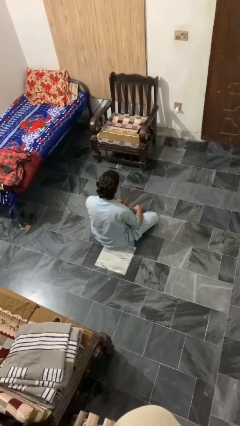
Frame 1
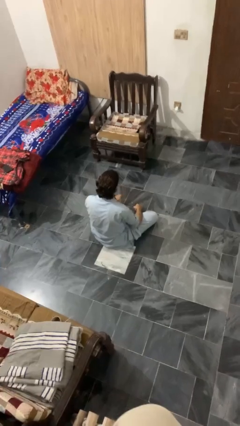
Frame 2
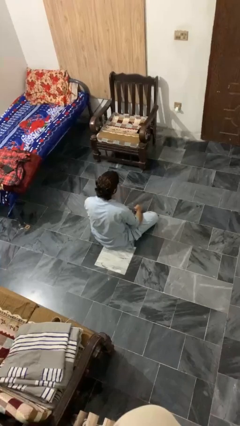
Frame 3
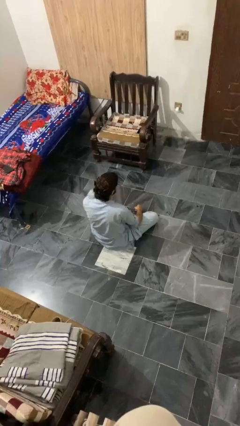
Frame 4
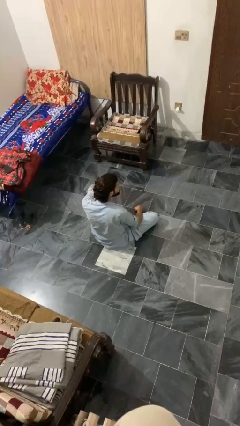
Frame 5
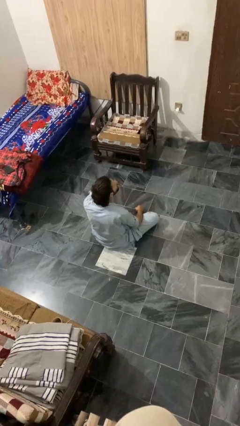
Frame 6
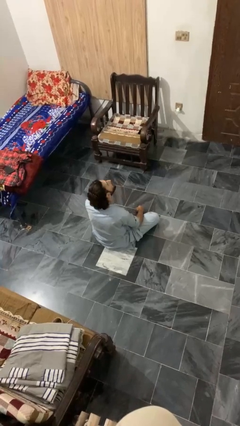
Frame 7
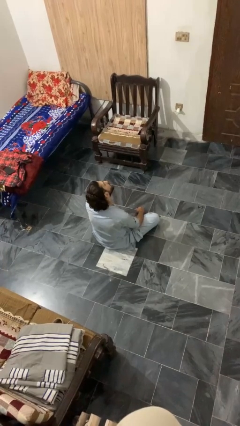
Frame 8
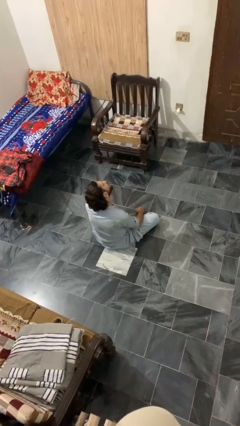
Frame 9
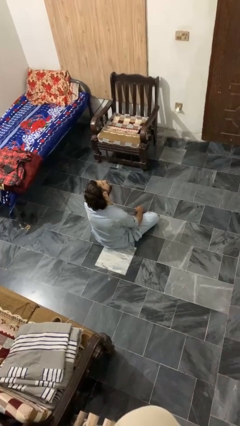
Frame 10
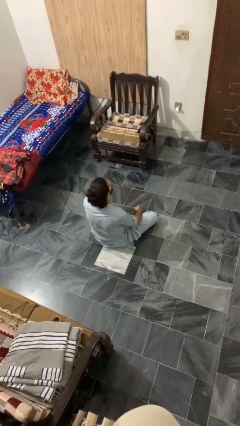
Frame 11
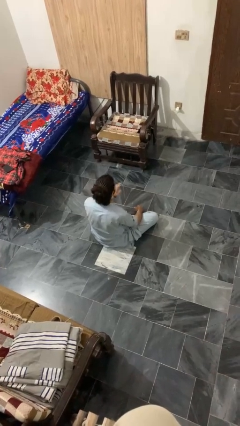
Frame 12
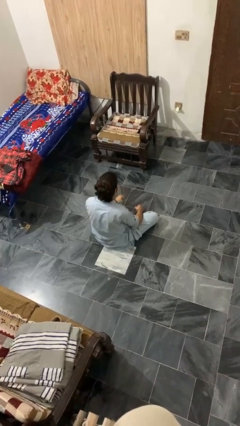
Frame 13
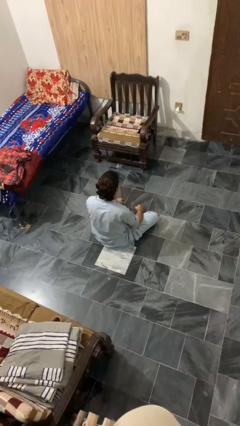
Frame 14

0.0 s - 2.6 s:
person rubs neck

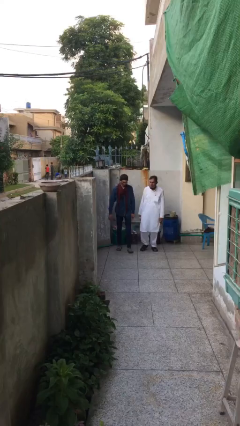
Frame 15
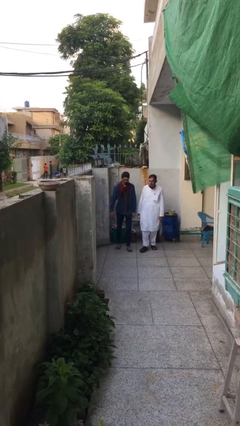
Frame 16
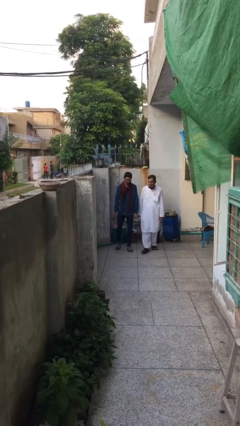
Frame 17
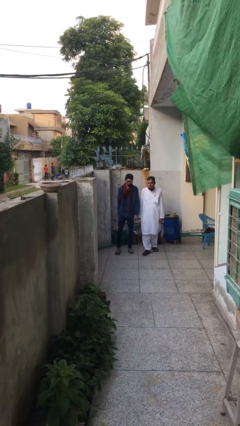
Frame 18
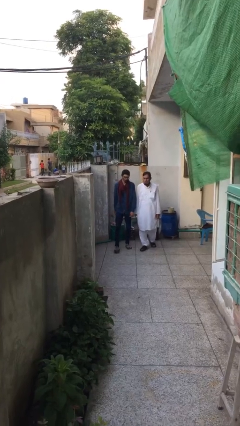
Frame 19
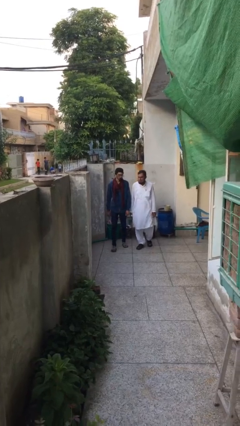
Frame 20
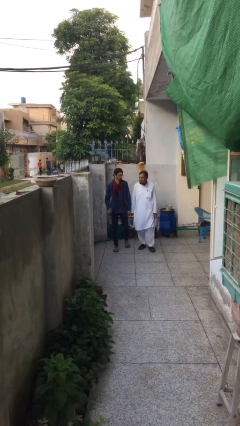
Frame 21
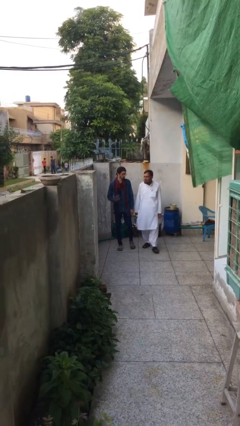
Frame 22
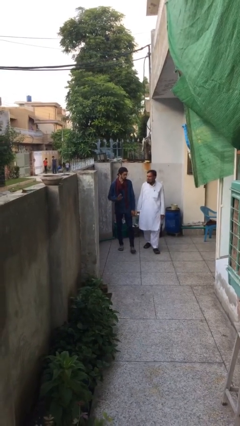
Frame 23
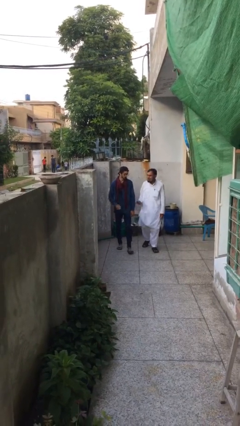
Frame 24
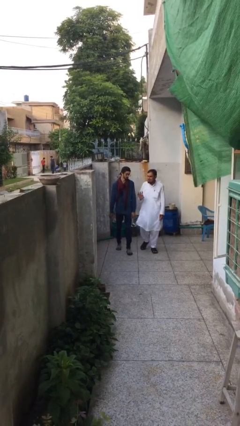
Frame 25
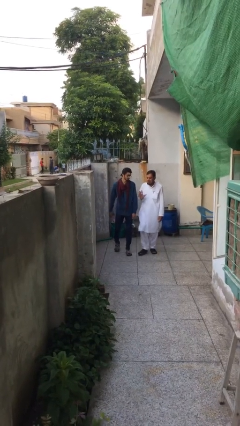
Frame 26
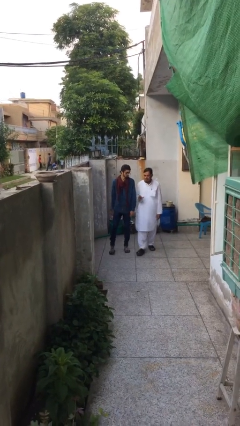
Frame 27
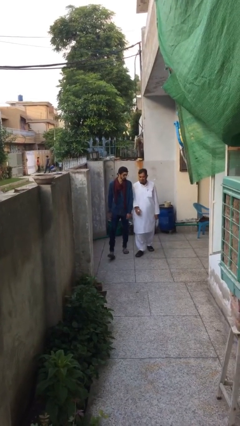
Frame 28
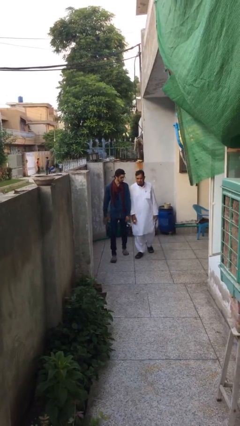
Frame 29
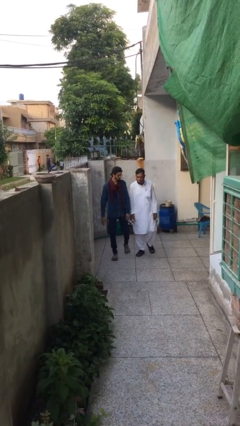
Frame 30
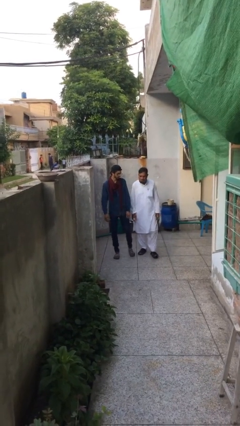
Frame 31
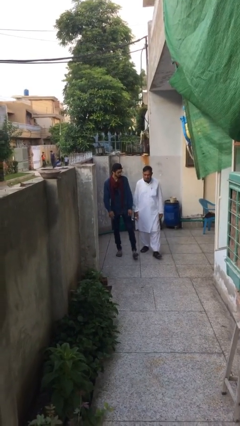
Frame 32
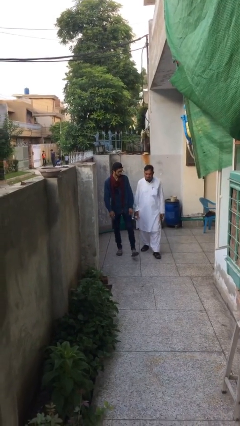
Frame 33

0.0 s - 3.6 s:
person talks to person

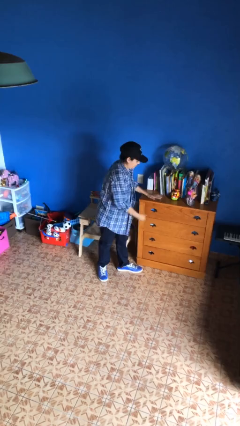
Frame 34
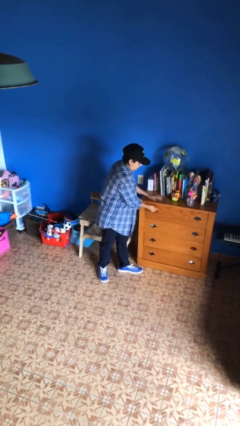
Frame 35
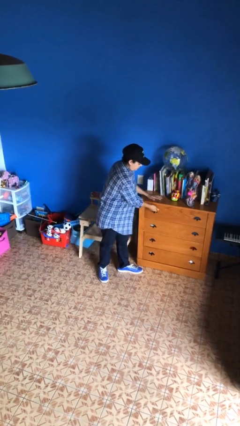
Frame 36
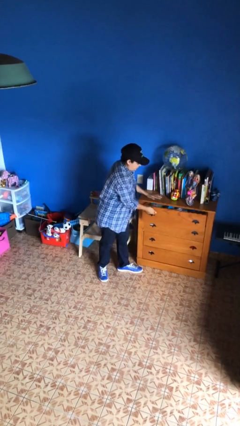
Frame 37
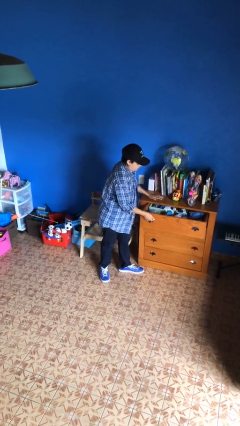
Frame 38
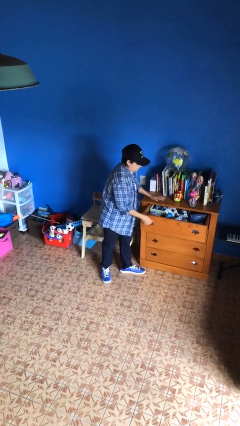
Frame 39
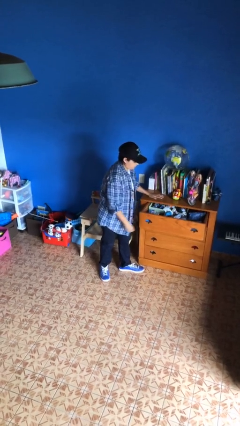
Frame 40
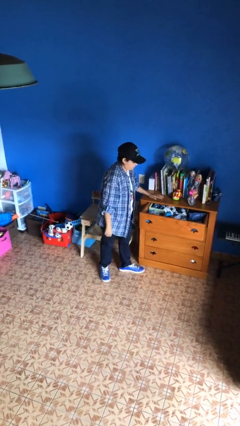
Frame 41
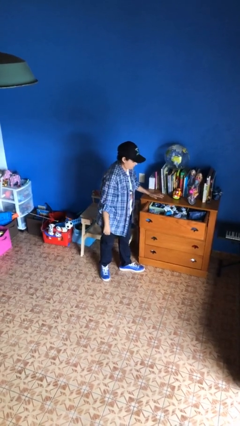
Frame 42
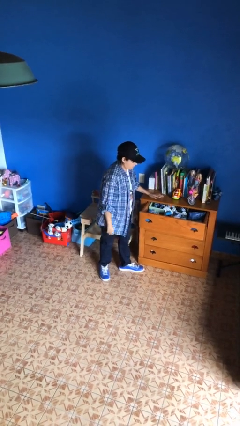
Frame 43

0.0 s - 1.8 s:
person opens dresser drawer

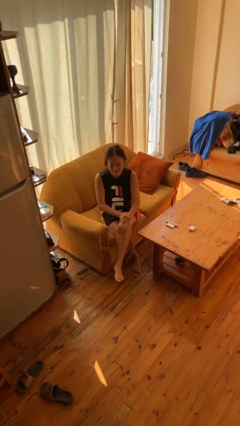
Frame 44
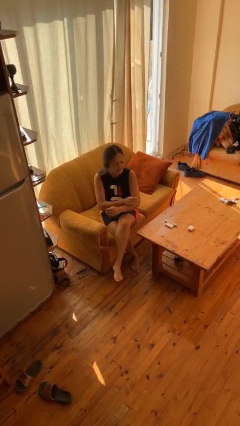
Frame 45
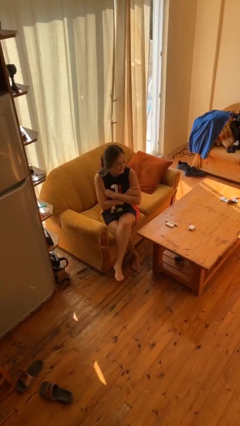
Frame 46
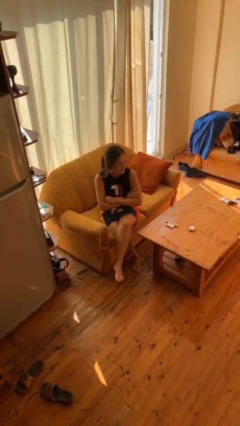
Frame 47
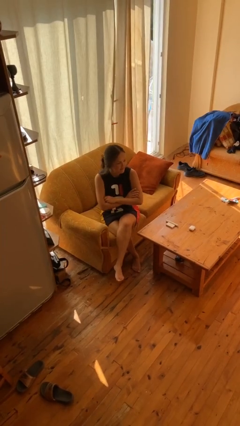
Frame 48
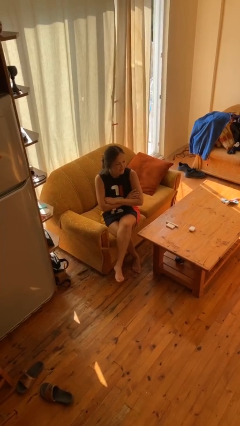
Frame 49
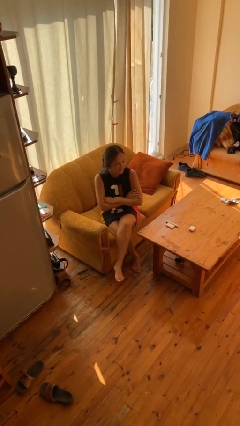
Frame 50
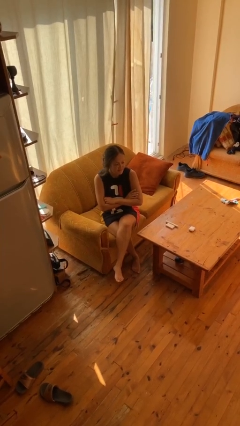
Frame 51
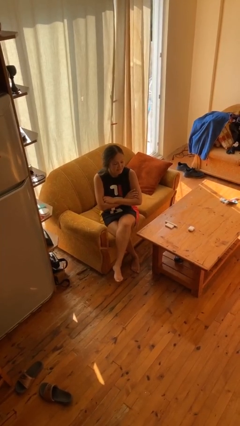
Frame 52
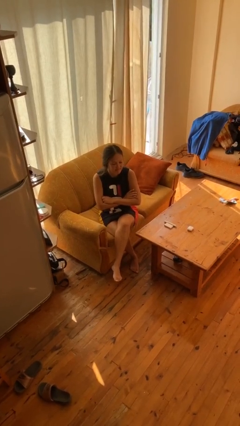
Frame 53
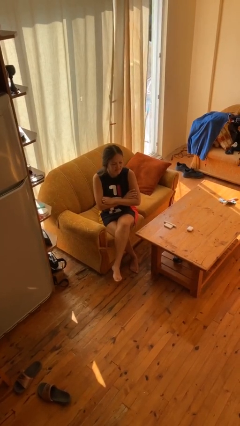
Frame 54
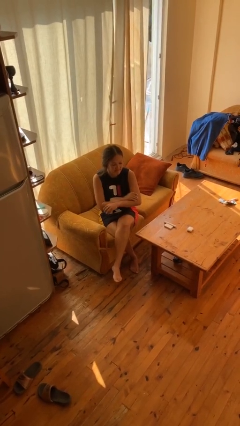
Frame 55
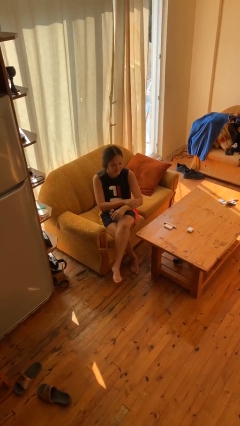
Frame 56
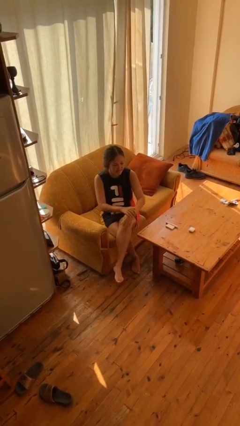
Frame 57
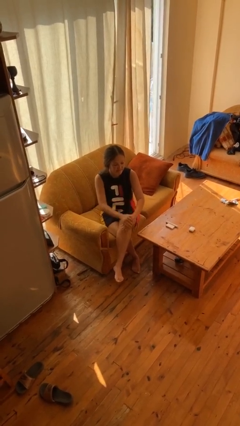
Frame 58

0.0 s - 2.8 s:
person crosses arms

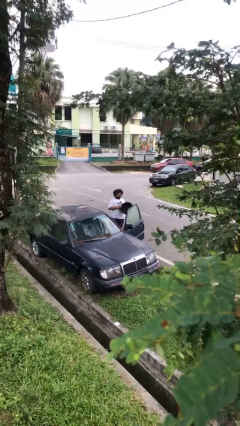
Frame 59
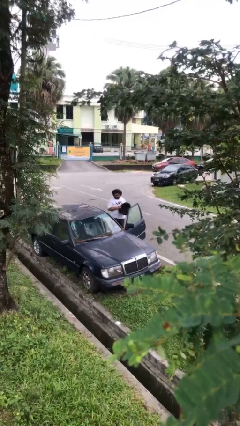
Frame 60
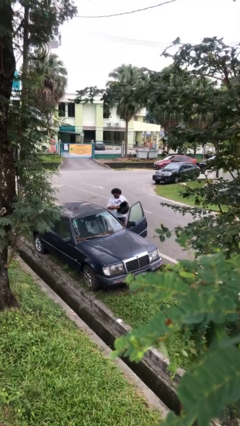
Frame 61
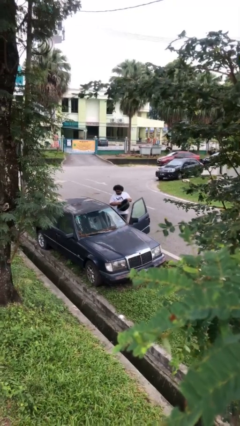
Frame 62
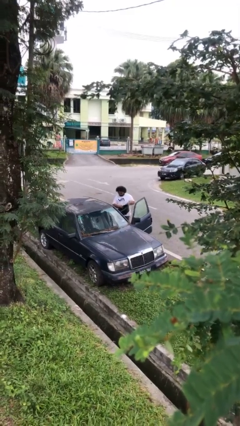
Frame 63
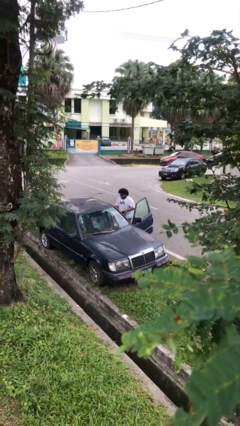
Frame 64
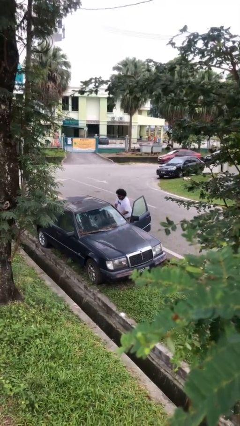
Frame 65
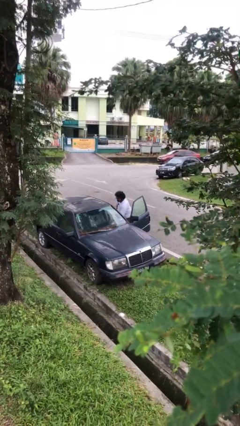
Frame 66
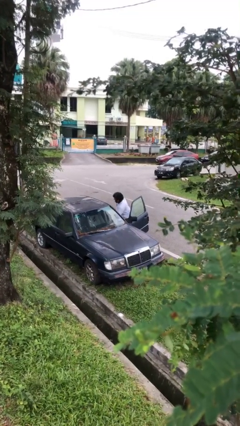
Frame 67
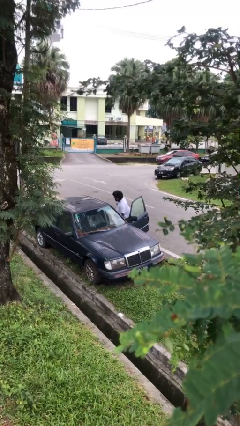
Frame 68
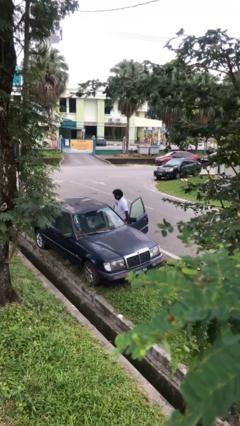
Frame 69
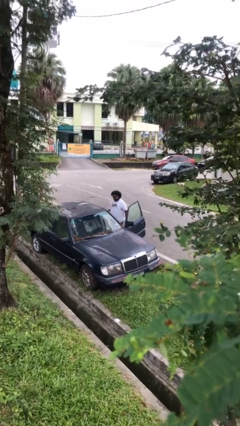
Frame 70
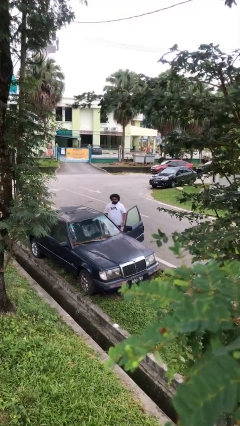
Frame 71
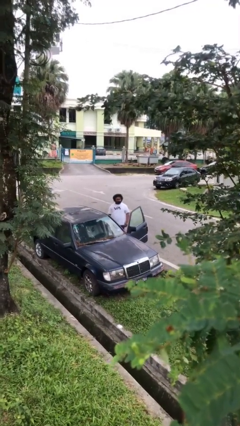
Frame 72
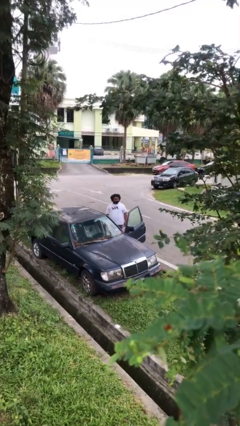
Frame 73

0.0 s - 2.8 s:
person loads car

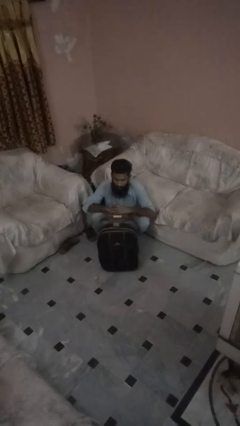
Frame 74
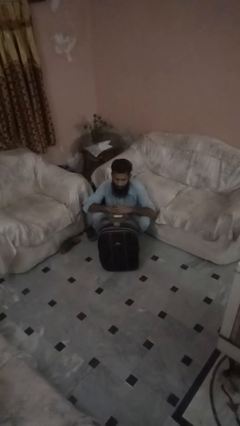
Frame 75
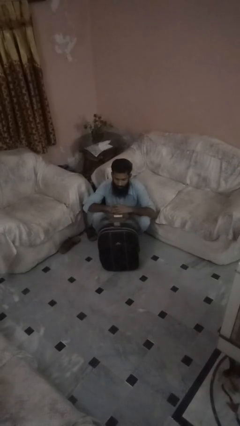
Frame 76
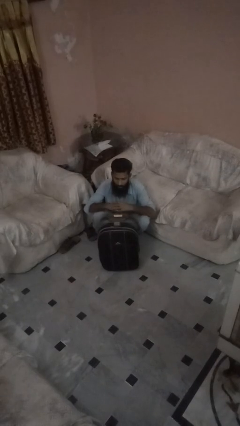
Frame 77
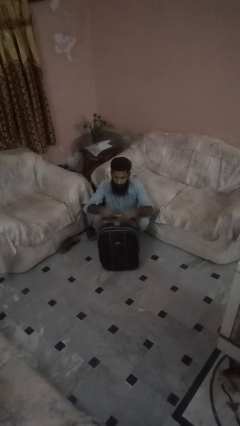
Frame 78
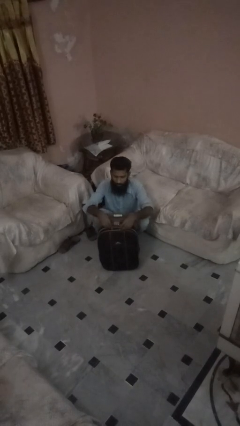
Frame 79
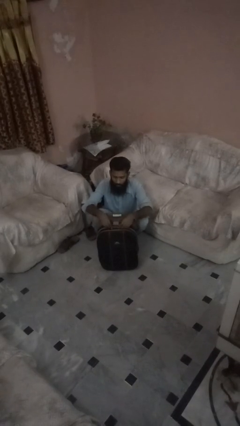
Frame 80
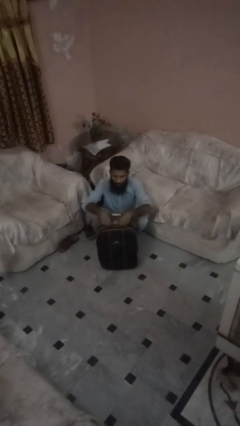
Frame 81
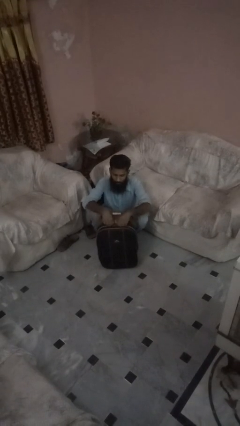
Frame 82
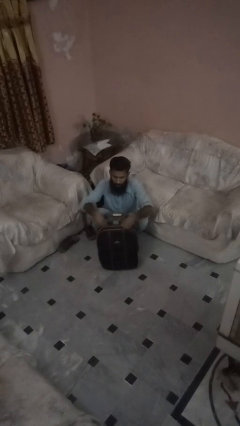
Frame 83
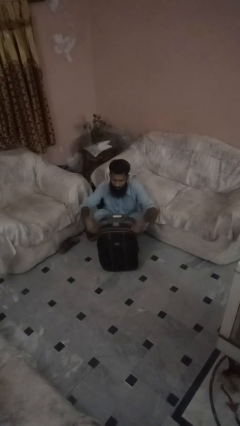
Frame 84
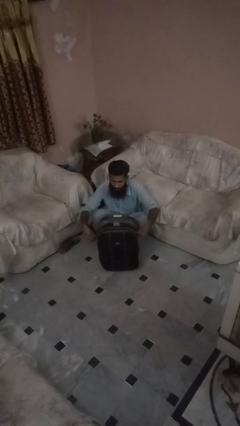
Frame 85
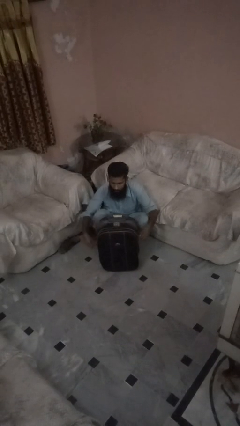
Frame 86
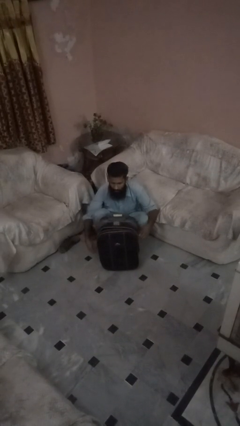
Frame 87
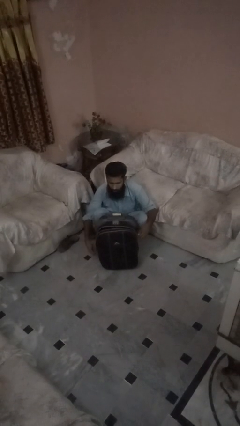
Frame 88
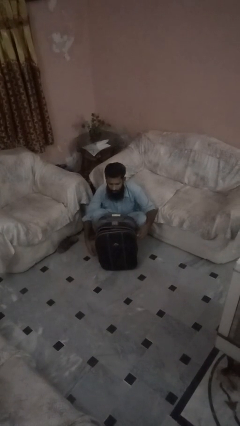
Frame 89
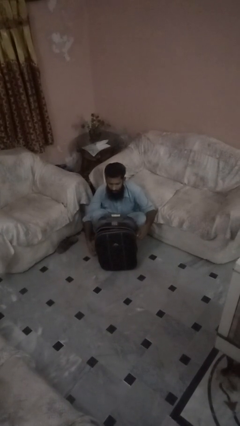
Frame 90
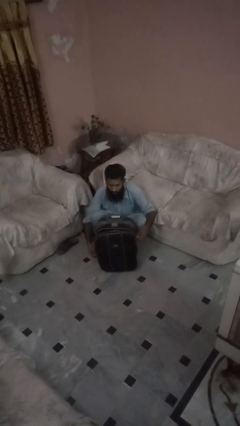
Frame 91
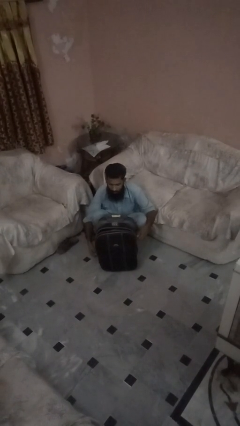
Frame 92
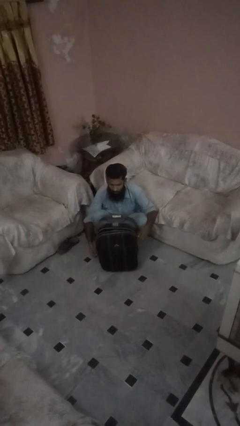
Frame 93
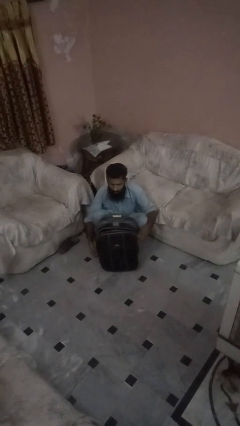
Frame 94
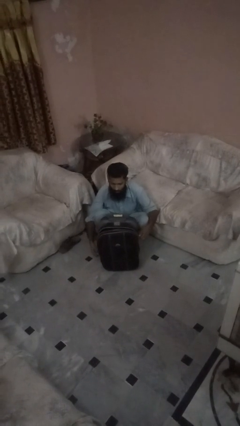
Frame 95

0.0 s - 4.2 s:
person opens suitcase
